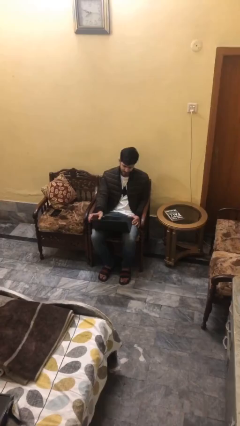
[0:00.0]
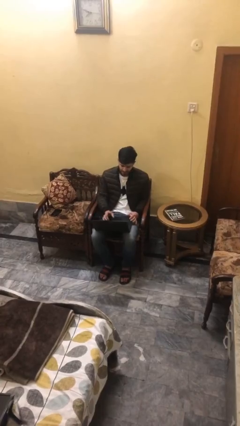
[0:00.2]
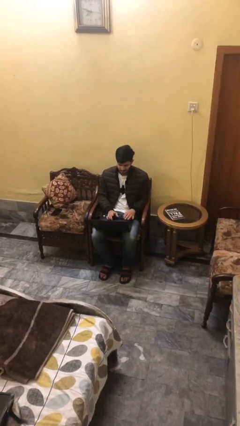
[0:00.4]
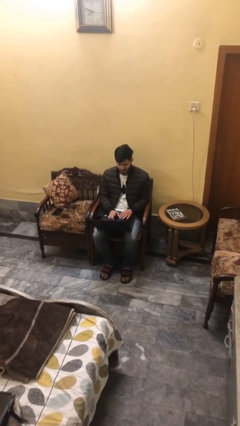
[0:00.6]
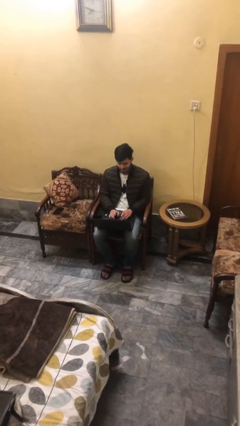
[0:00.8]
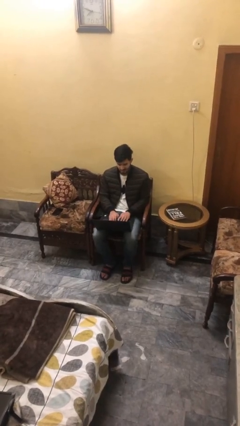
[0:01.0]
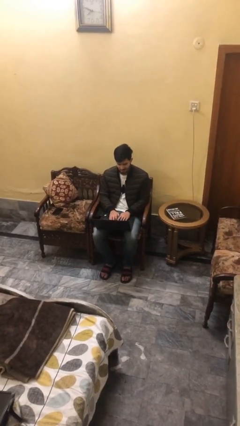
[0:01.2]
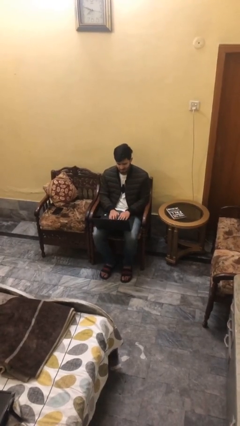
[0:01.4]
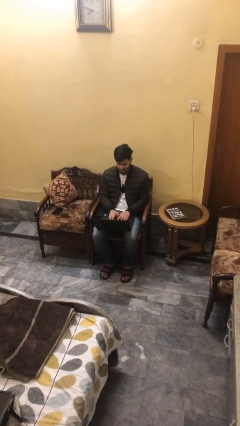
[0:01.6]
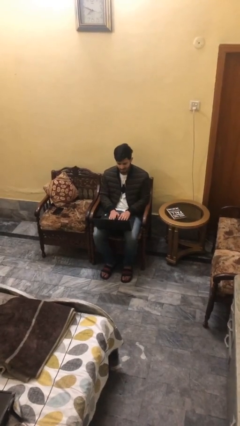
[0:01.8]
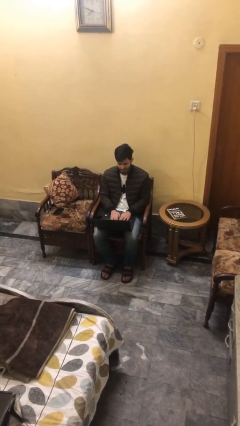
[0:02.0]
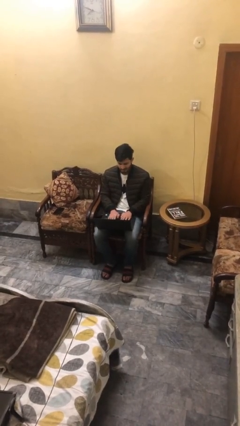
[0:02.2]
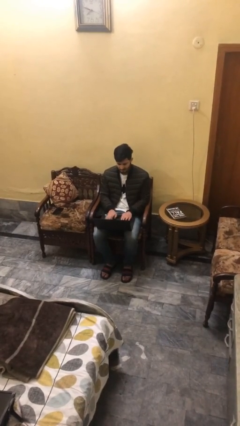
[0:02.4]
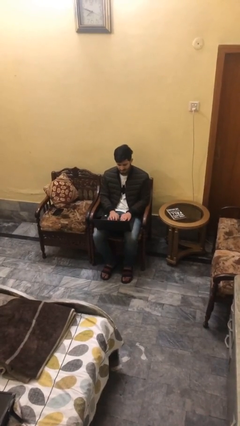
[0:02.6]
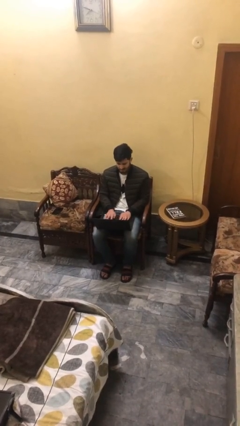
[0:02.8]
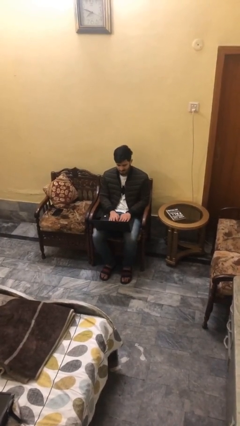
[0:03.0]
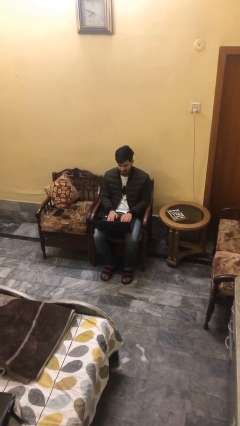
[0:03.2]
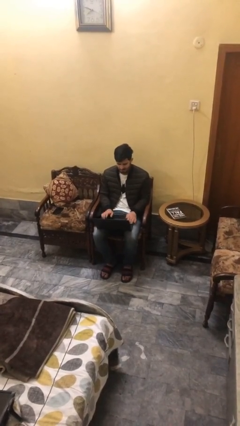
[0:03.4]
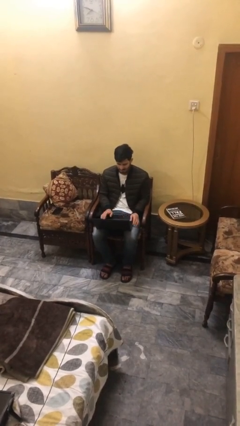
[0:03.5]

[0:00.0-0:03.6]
person interacts with laptop

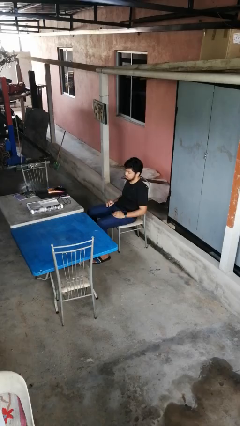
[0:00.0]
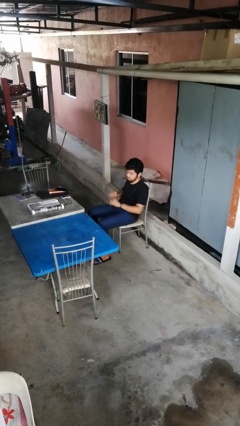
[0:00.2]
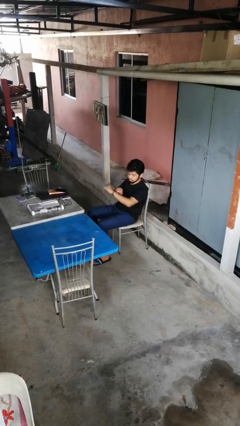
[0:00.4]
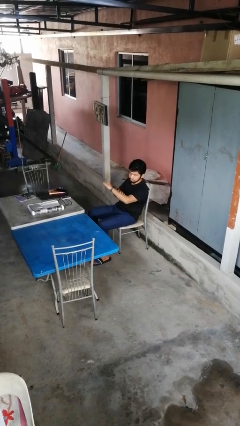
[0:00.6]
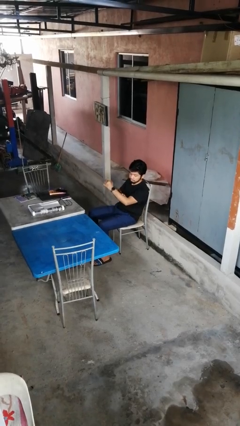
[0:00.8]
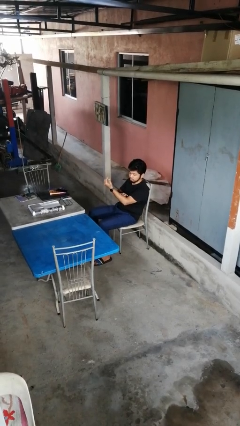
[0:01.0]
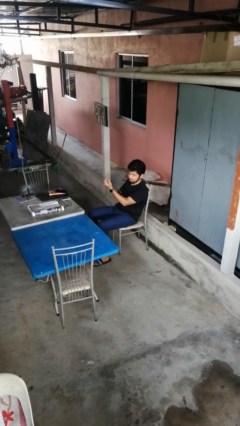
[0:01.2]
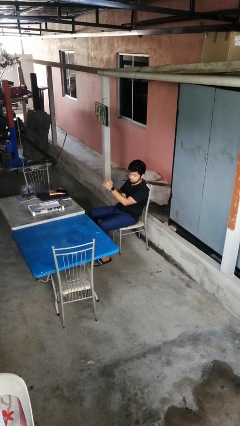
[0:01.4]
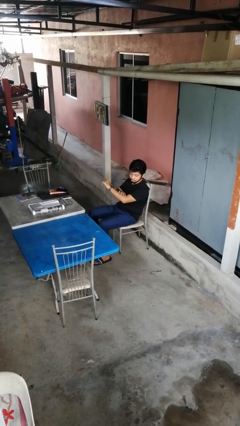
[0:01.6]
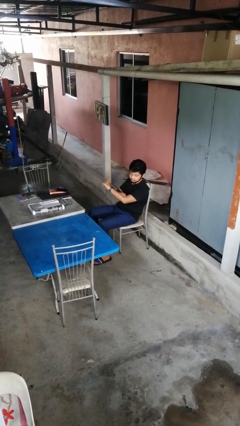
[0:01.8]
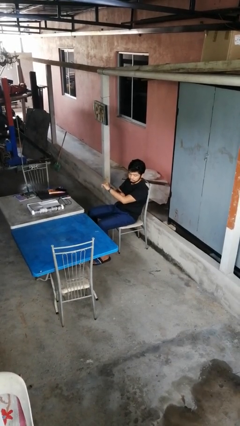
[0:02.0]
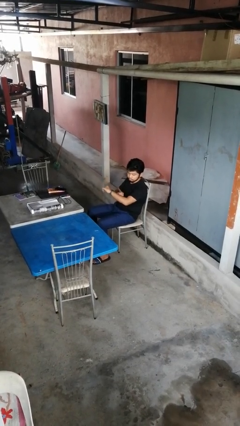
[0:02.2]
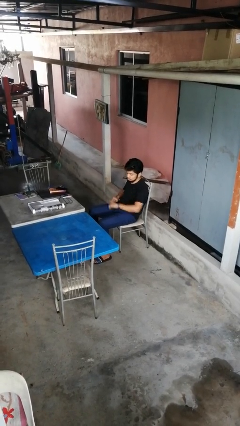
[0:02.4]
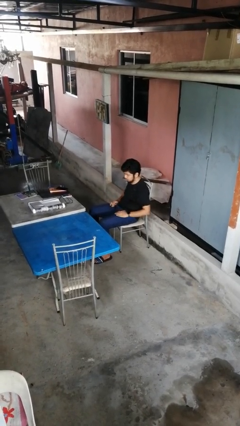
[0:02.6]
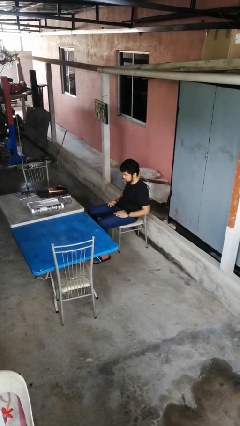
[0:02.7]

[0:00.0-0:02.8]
person looks at hands in lap

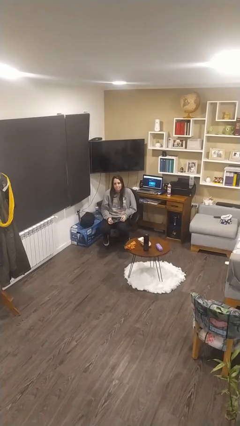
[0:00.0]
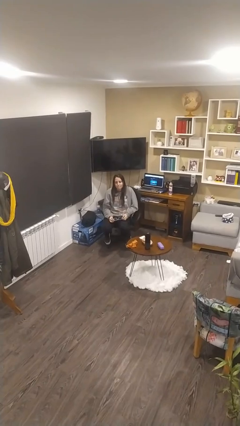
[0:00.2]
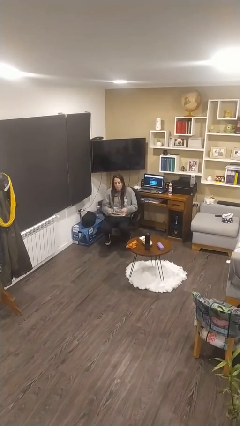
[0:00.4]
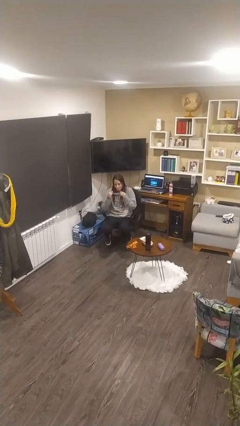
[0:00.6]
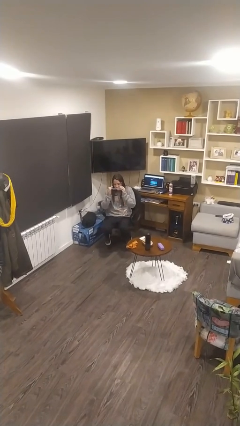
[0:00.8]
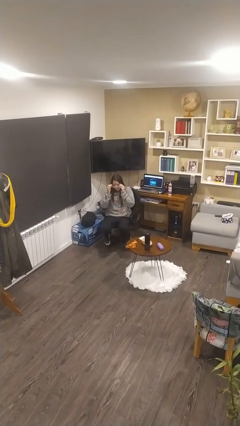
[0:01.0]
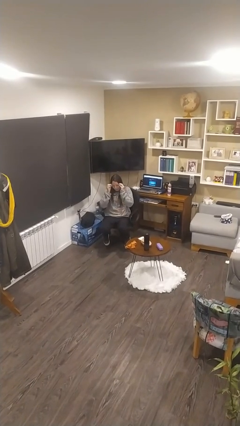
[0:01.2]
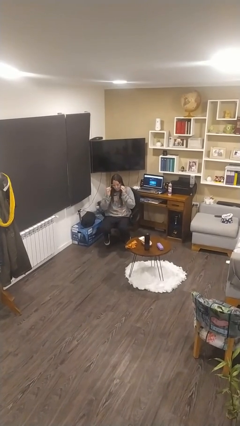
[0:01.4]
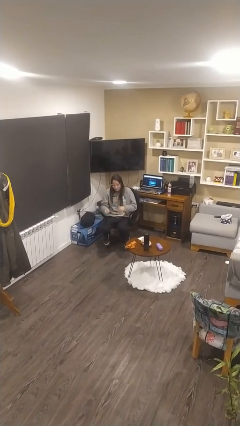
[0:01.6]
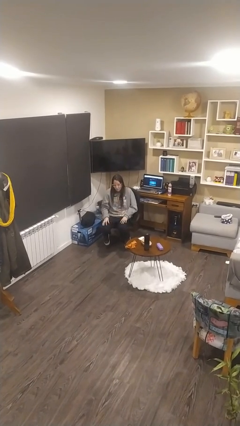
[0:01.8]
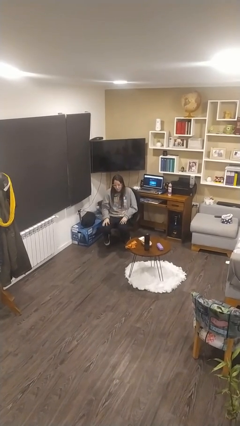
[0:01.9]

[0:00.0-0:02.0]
person puts on glasses

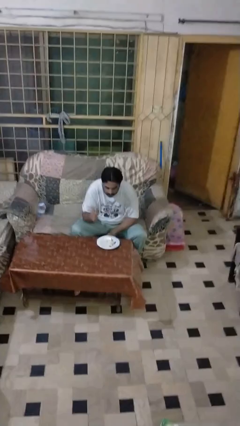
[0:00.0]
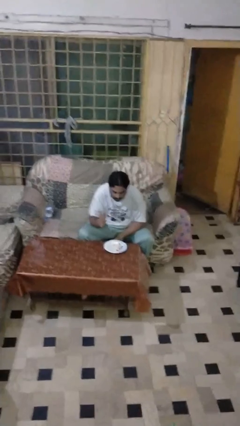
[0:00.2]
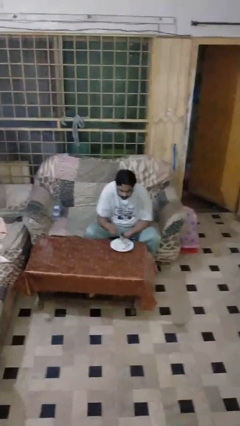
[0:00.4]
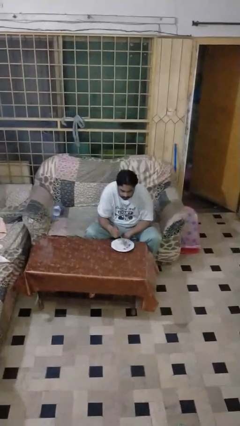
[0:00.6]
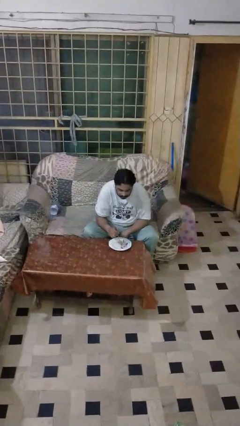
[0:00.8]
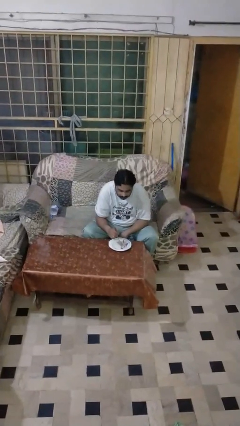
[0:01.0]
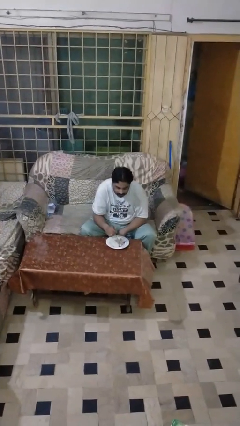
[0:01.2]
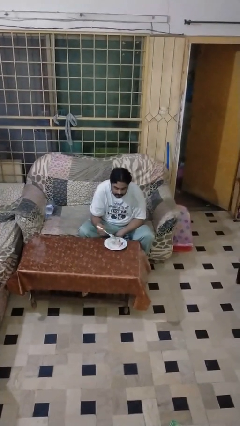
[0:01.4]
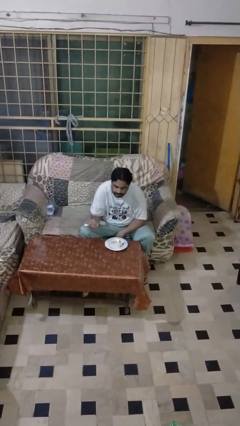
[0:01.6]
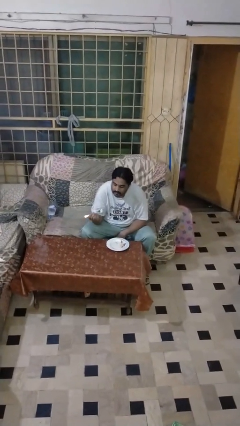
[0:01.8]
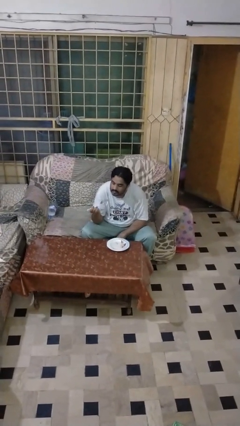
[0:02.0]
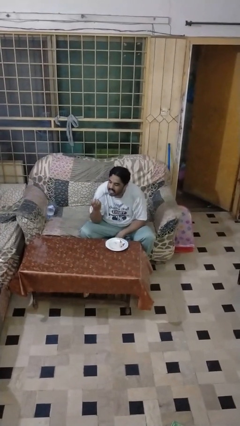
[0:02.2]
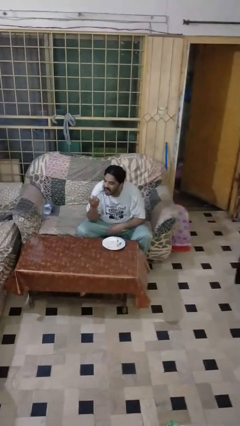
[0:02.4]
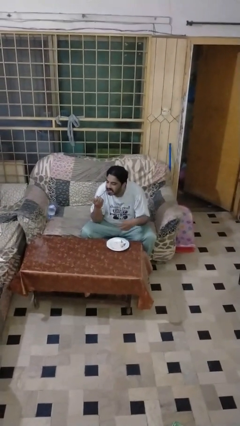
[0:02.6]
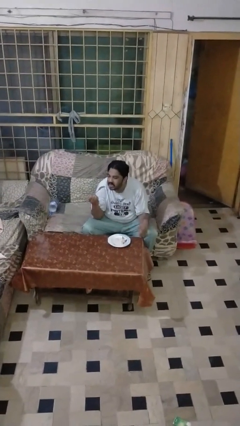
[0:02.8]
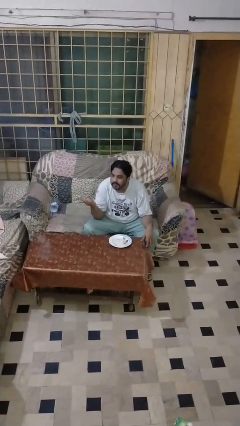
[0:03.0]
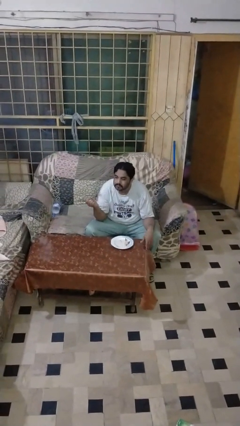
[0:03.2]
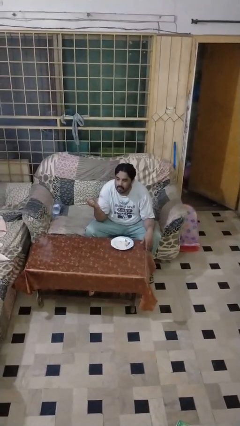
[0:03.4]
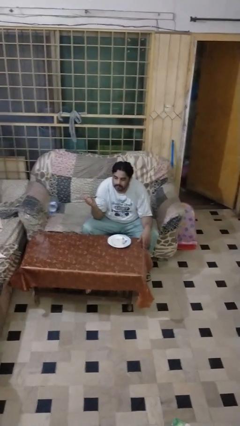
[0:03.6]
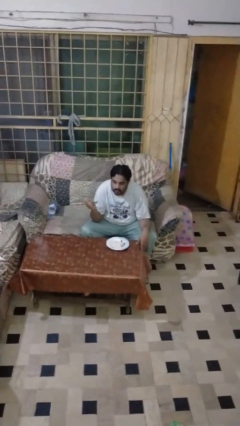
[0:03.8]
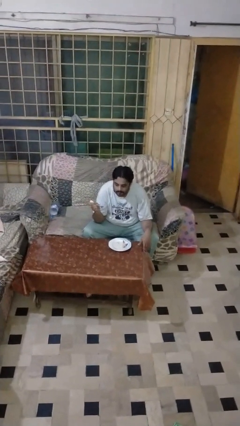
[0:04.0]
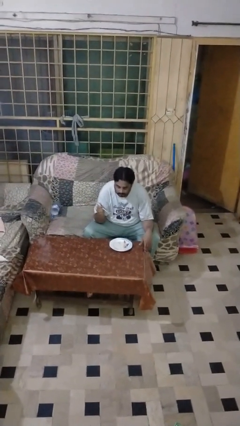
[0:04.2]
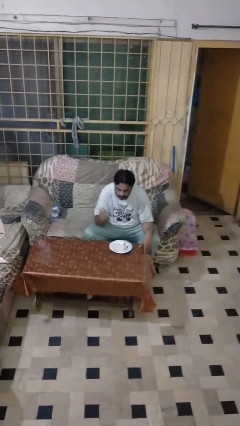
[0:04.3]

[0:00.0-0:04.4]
person eats with utensil

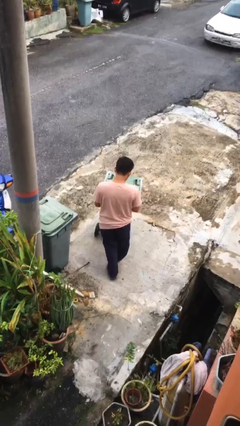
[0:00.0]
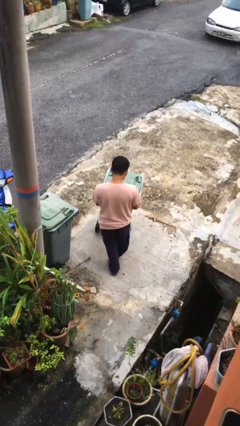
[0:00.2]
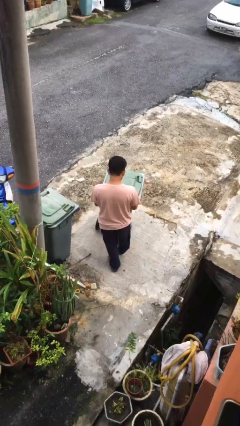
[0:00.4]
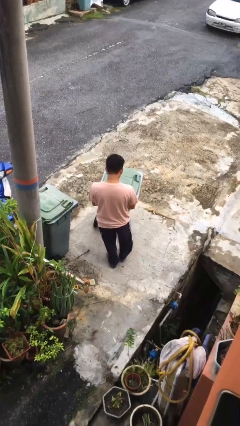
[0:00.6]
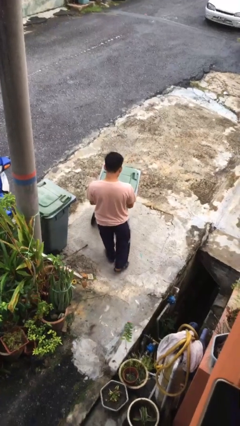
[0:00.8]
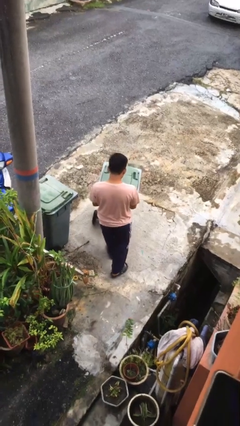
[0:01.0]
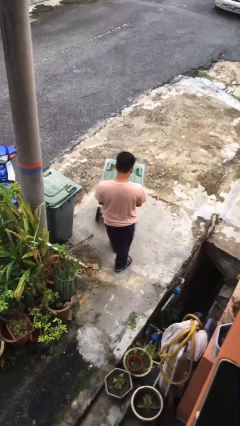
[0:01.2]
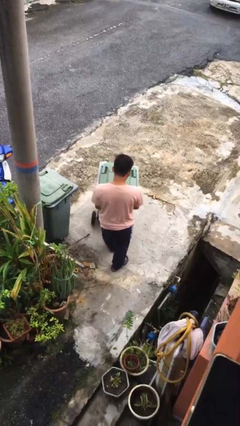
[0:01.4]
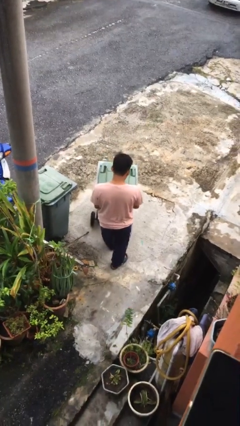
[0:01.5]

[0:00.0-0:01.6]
person pulls wheeled trashcan

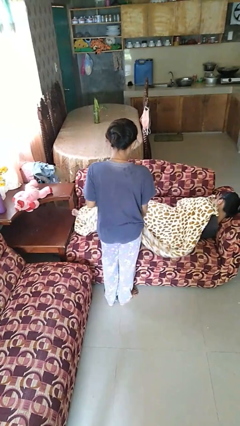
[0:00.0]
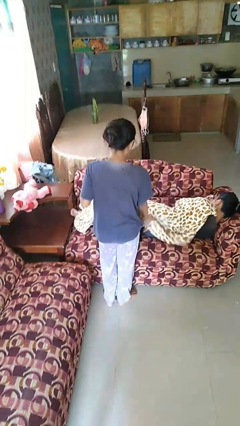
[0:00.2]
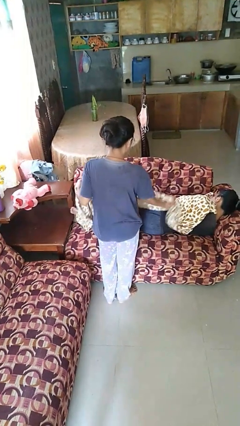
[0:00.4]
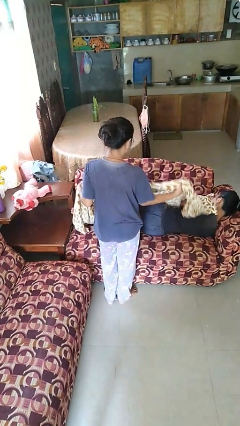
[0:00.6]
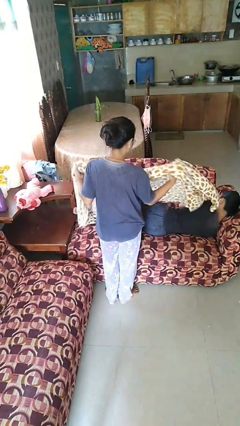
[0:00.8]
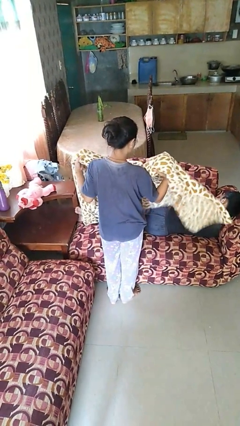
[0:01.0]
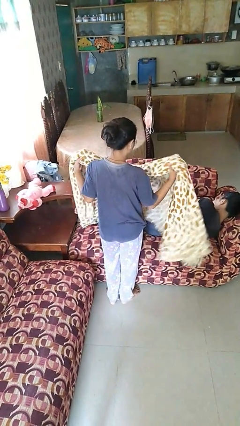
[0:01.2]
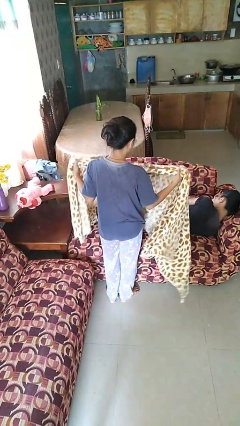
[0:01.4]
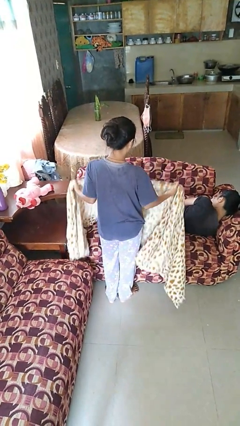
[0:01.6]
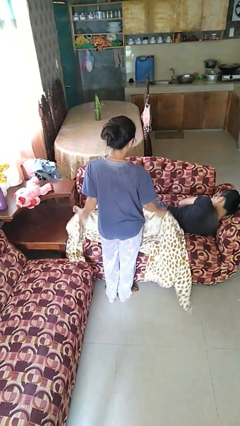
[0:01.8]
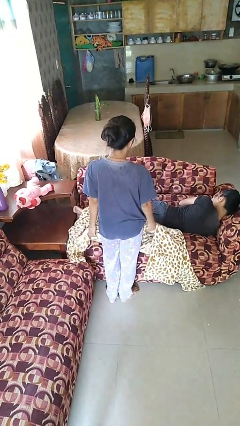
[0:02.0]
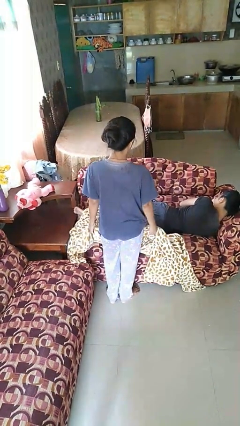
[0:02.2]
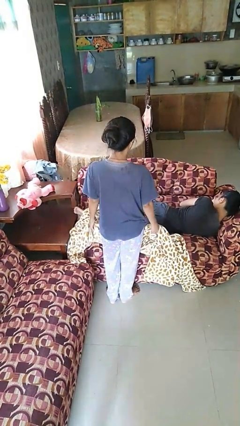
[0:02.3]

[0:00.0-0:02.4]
person uncovers friend with blanket

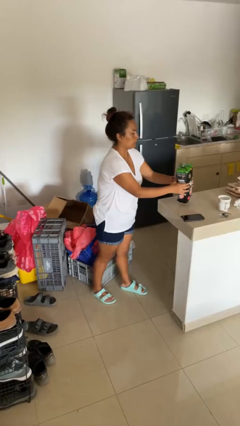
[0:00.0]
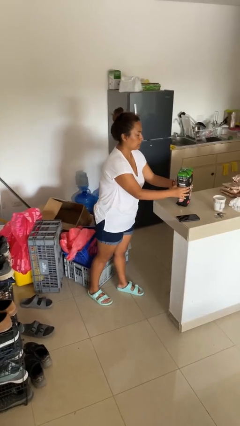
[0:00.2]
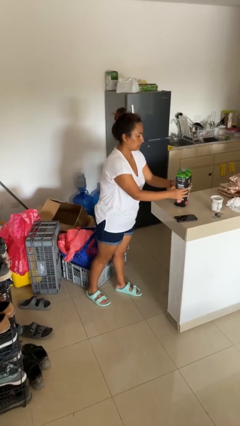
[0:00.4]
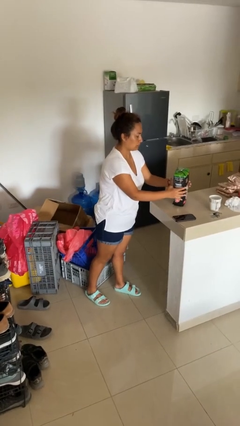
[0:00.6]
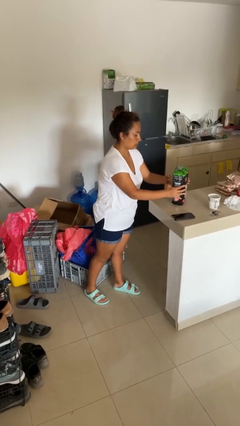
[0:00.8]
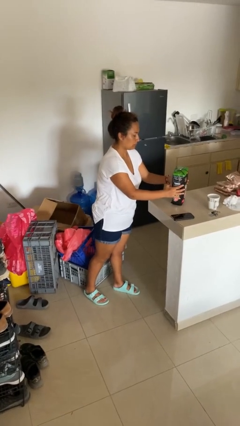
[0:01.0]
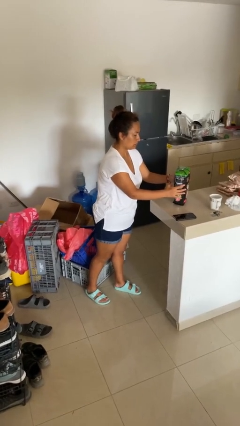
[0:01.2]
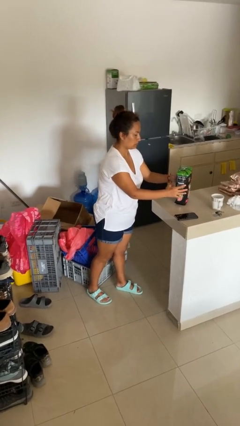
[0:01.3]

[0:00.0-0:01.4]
person puts down object on countertop
